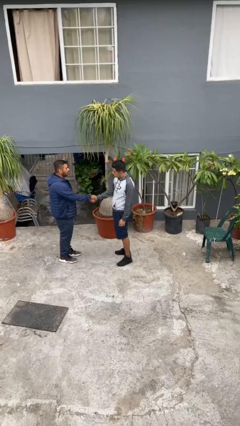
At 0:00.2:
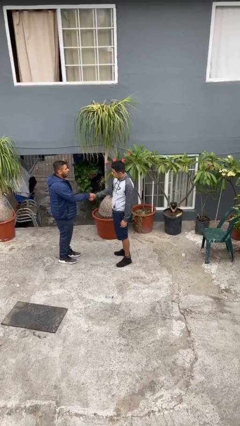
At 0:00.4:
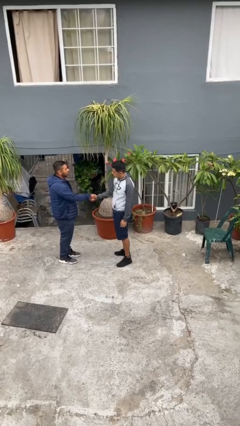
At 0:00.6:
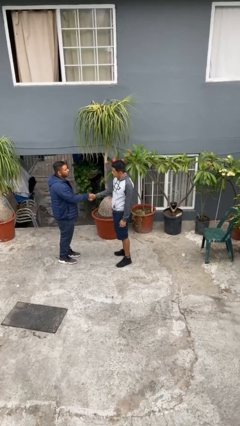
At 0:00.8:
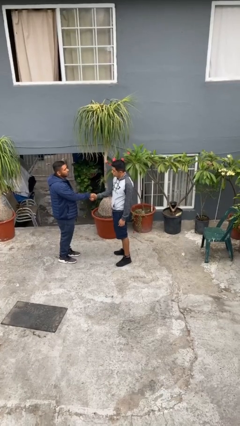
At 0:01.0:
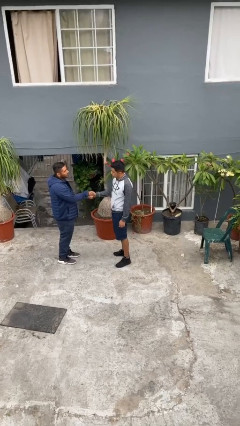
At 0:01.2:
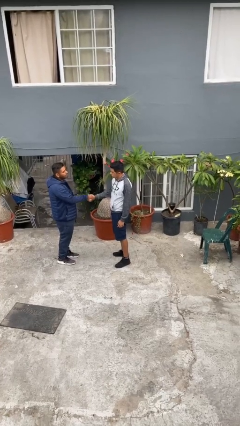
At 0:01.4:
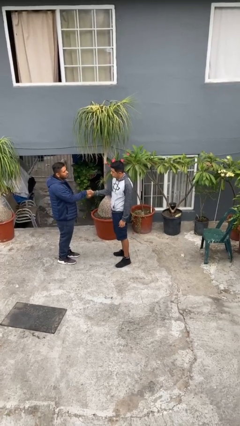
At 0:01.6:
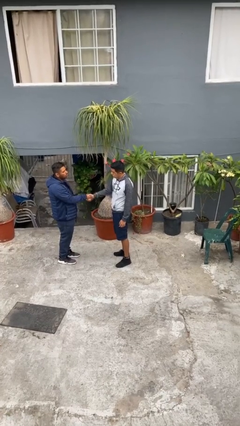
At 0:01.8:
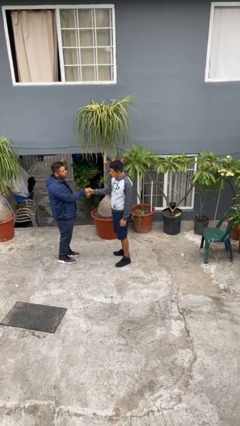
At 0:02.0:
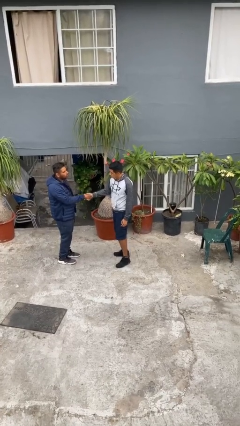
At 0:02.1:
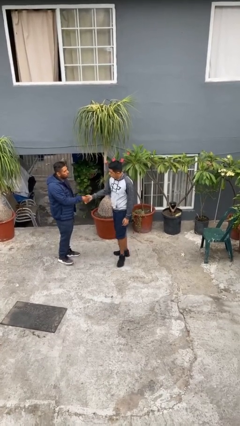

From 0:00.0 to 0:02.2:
person shakes hand

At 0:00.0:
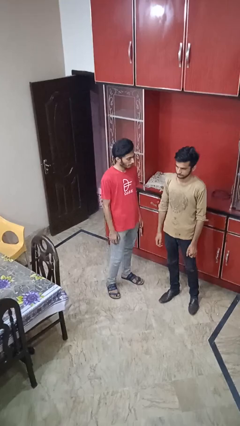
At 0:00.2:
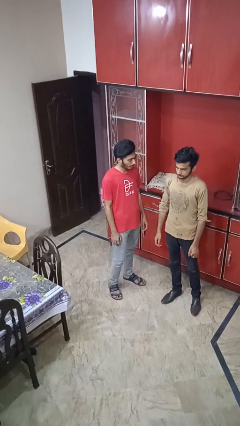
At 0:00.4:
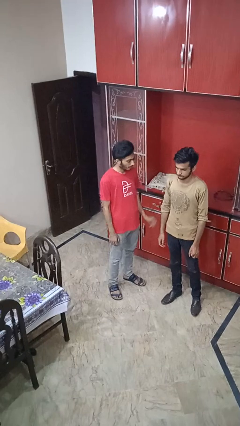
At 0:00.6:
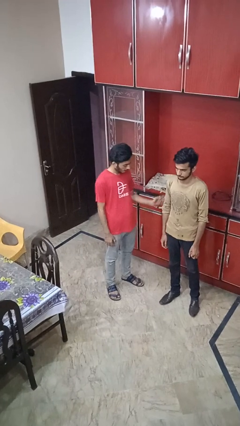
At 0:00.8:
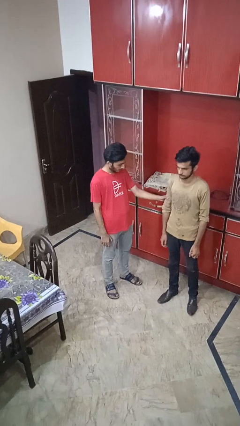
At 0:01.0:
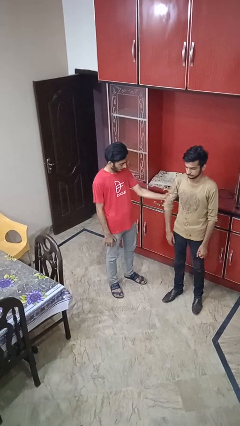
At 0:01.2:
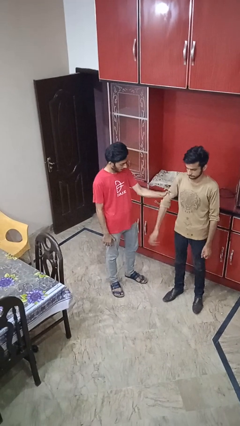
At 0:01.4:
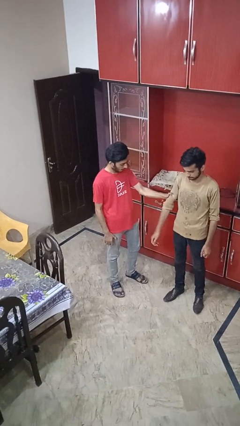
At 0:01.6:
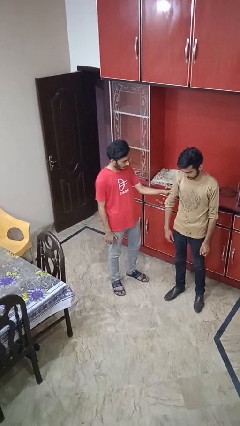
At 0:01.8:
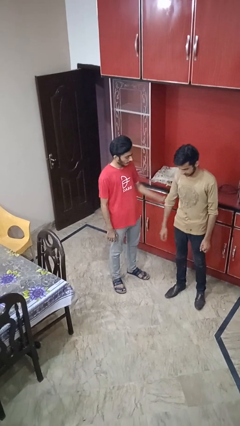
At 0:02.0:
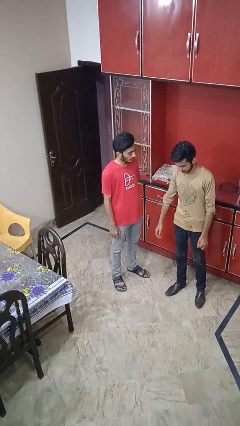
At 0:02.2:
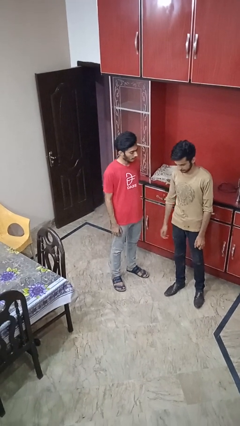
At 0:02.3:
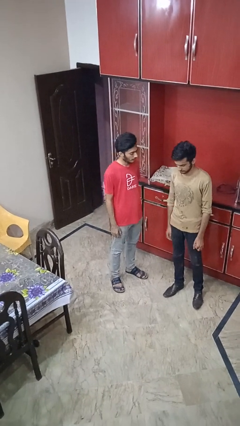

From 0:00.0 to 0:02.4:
person grabs person by bicep

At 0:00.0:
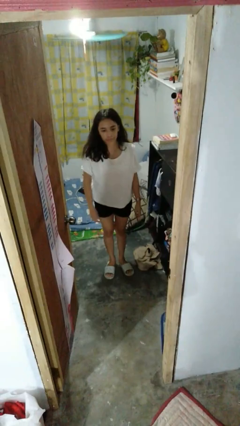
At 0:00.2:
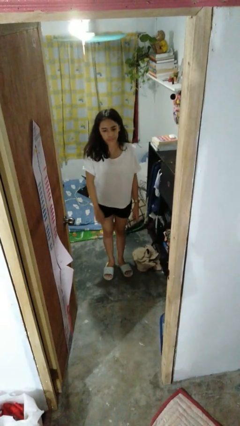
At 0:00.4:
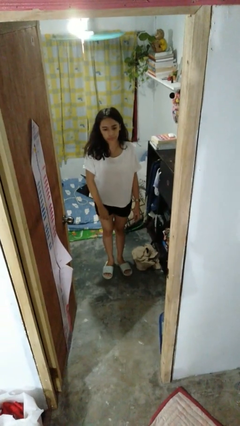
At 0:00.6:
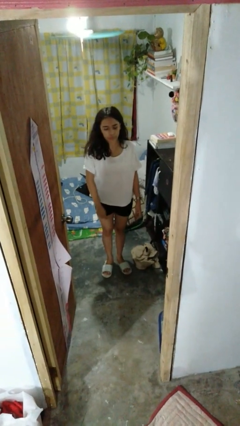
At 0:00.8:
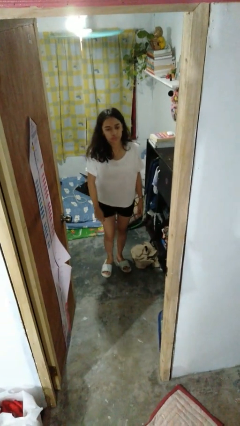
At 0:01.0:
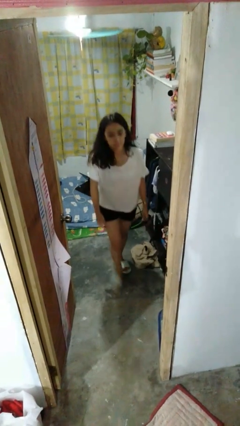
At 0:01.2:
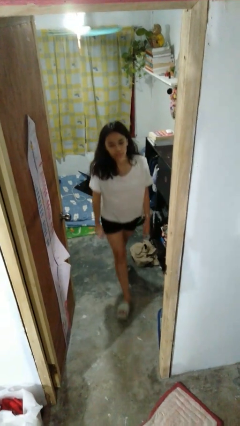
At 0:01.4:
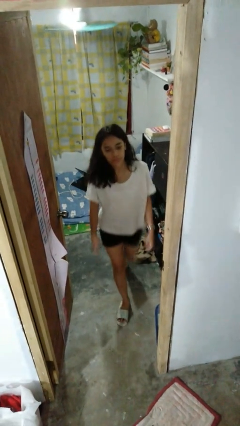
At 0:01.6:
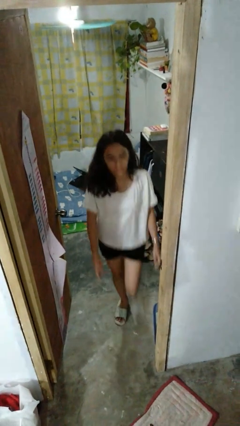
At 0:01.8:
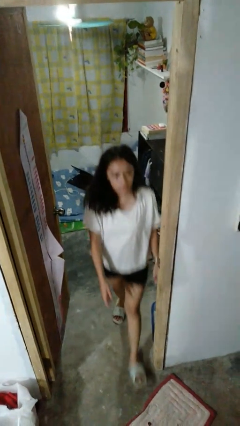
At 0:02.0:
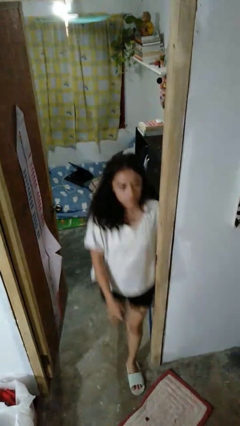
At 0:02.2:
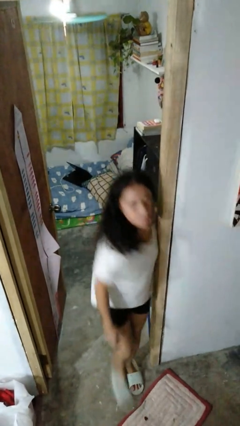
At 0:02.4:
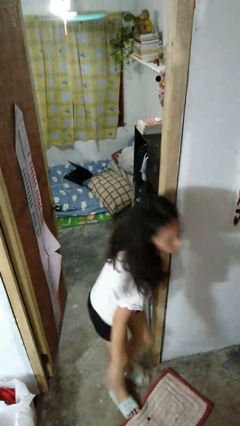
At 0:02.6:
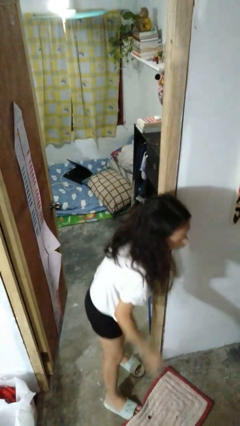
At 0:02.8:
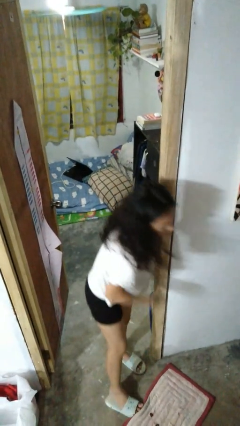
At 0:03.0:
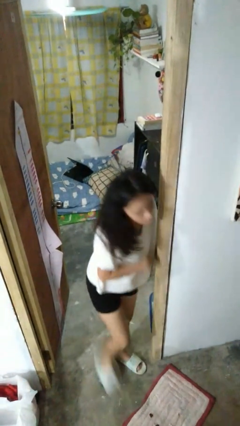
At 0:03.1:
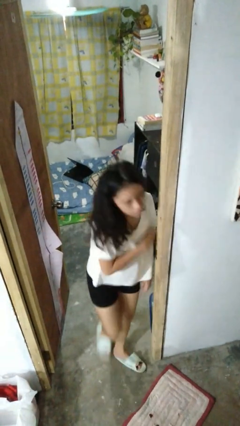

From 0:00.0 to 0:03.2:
person bumps into wall

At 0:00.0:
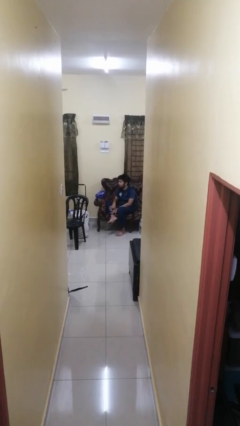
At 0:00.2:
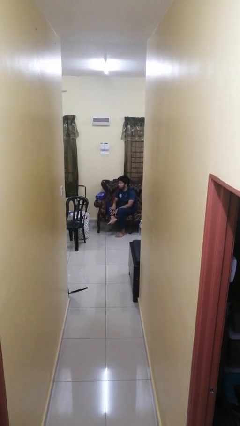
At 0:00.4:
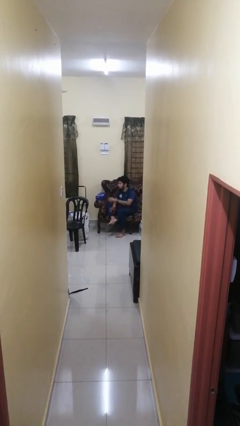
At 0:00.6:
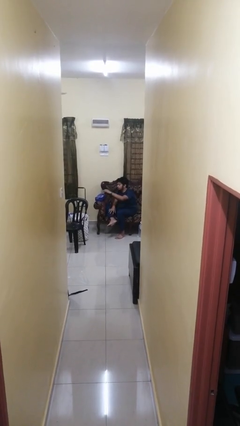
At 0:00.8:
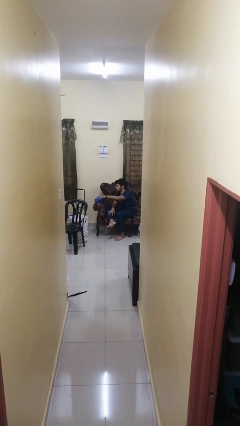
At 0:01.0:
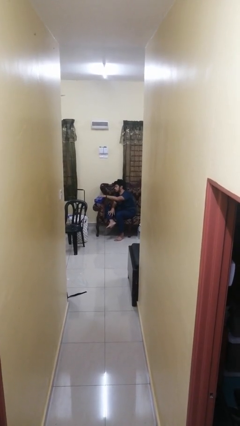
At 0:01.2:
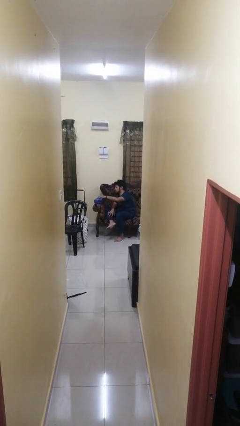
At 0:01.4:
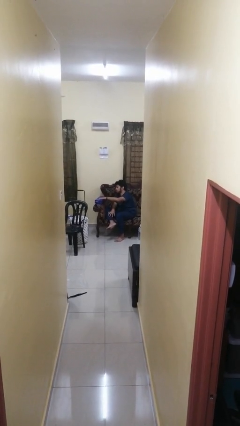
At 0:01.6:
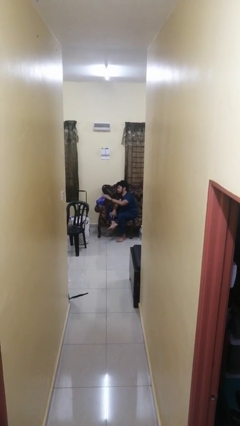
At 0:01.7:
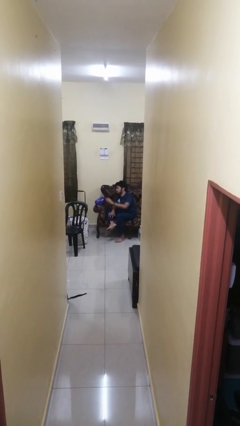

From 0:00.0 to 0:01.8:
person taps object with finger

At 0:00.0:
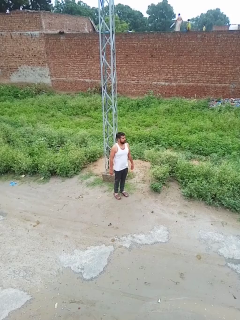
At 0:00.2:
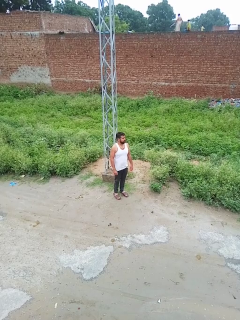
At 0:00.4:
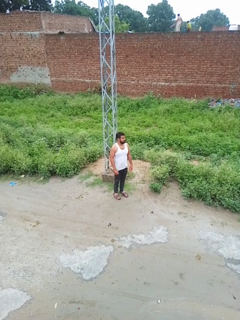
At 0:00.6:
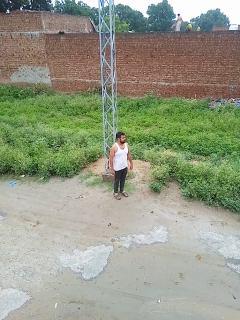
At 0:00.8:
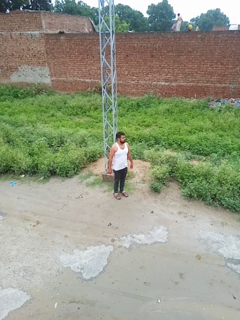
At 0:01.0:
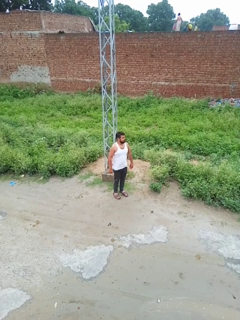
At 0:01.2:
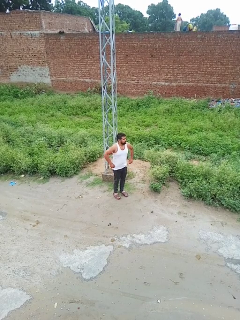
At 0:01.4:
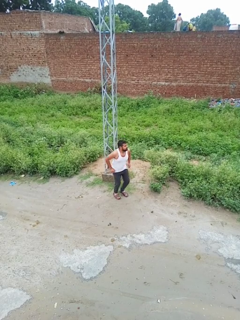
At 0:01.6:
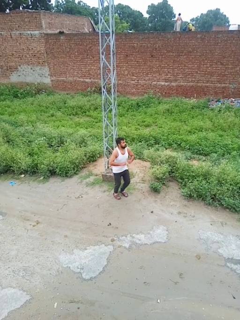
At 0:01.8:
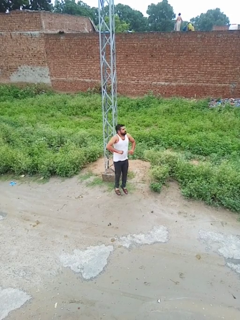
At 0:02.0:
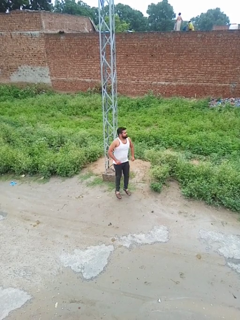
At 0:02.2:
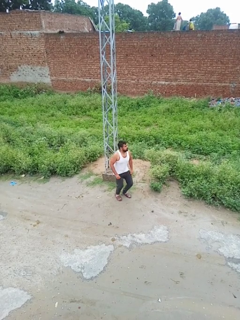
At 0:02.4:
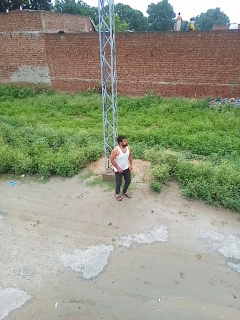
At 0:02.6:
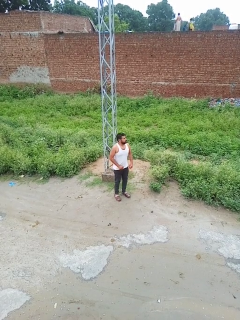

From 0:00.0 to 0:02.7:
person jumps

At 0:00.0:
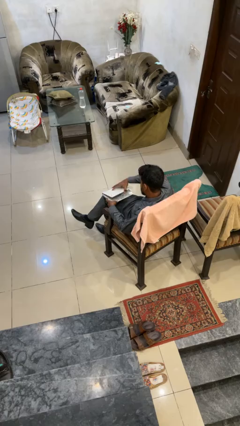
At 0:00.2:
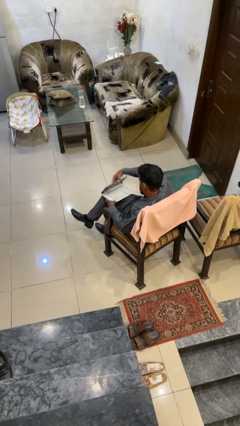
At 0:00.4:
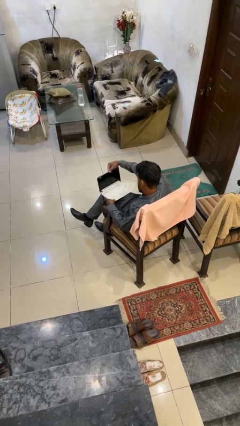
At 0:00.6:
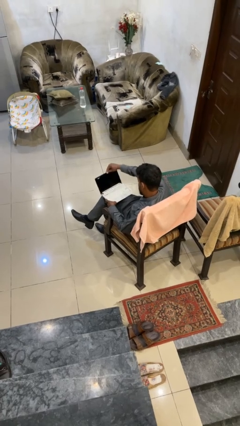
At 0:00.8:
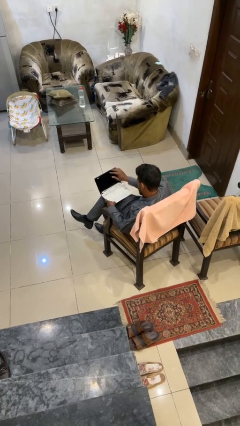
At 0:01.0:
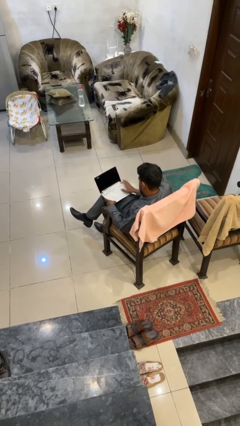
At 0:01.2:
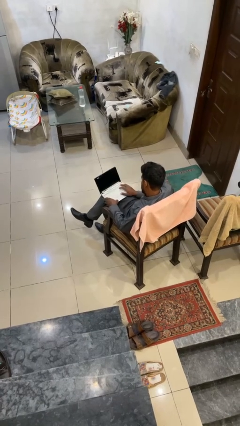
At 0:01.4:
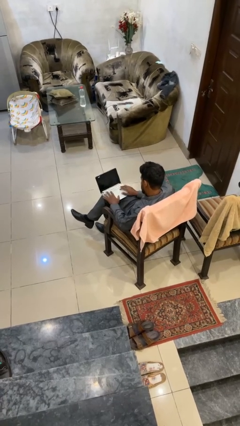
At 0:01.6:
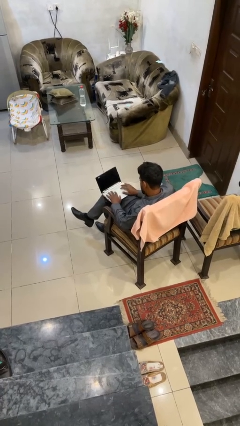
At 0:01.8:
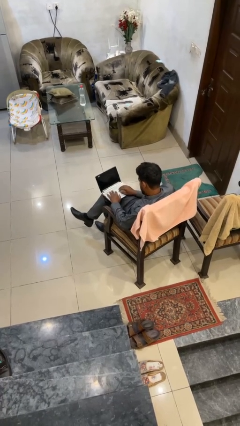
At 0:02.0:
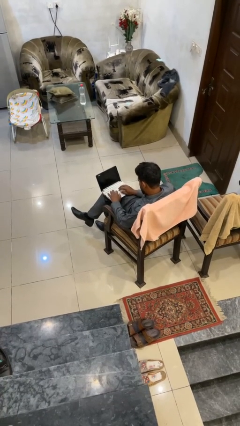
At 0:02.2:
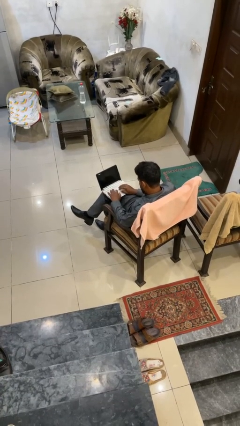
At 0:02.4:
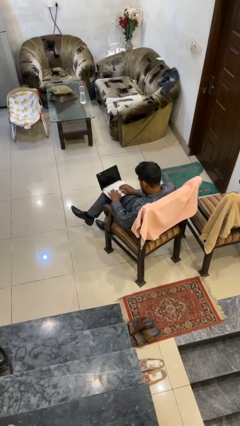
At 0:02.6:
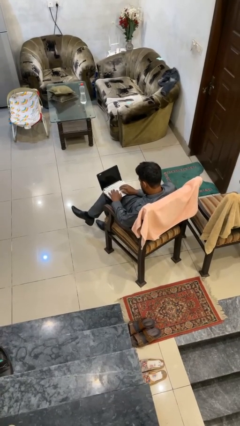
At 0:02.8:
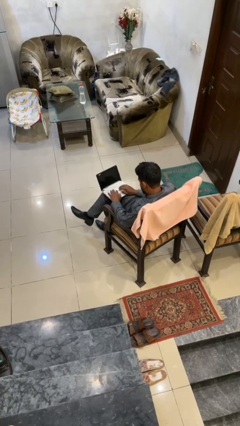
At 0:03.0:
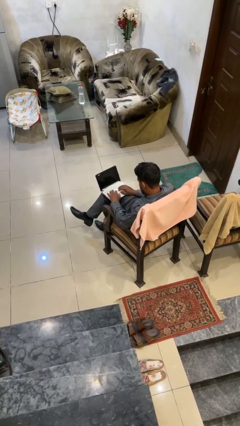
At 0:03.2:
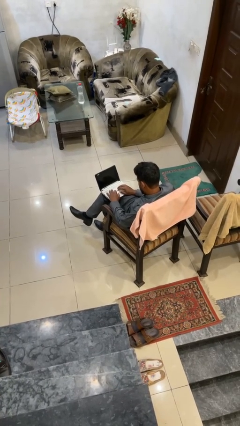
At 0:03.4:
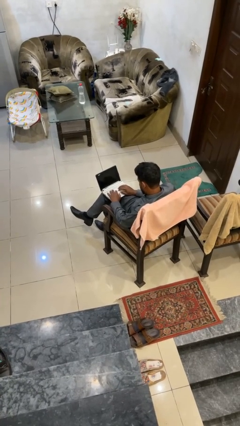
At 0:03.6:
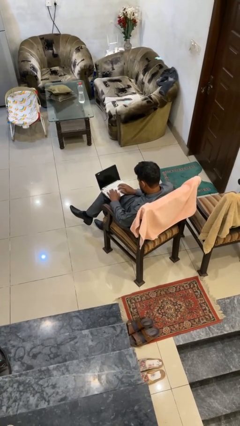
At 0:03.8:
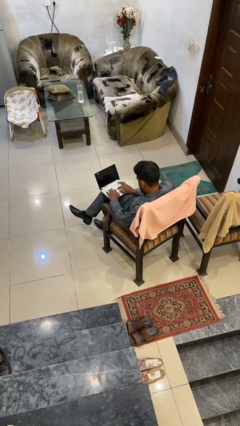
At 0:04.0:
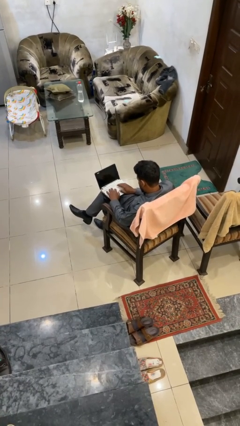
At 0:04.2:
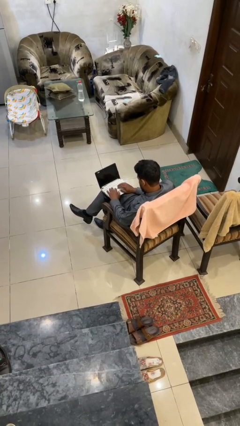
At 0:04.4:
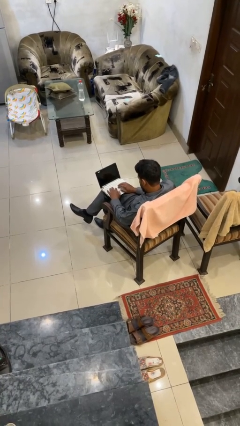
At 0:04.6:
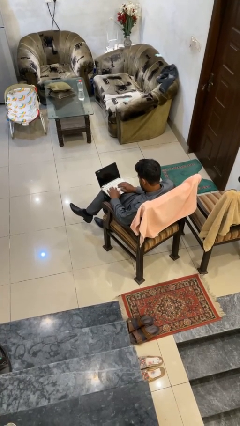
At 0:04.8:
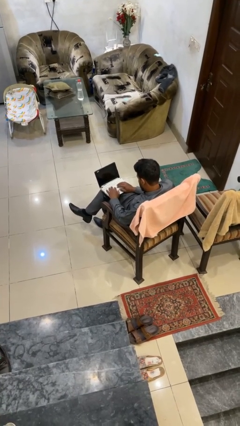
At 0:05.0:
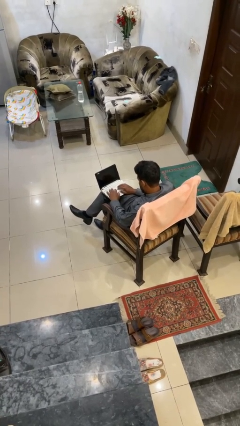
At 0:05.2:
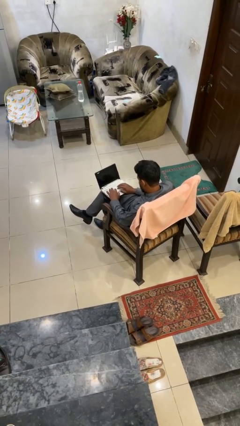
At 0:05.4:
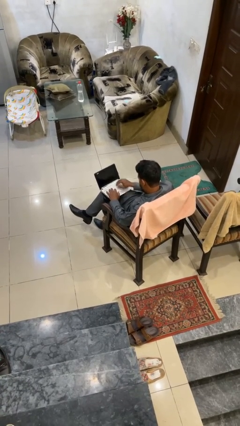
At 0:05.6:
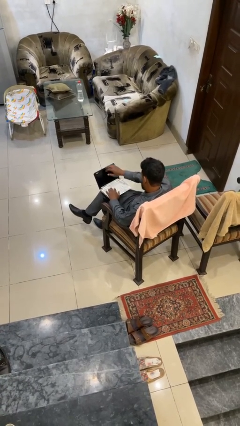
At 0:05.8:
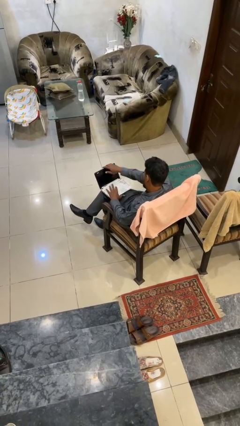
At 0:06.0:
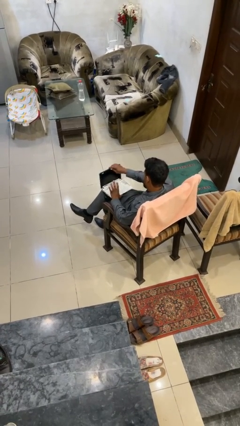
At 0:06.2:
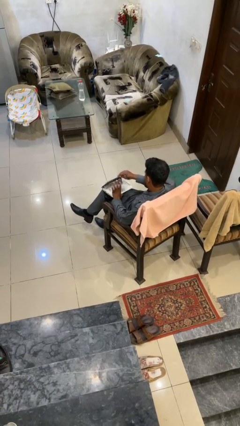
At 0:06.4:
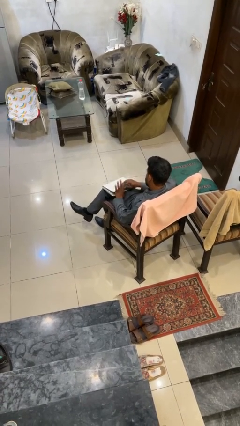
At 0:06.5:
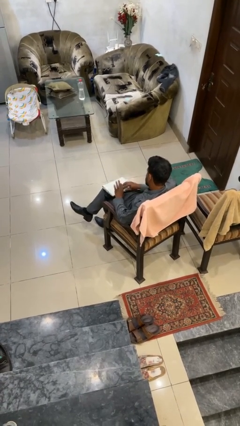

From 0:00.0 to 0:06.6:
person interacts with laptop
